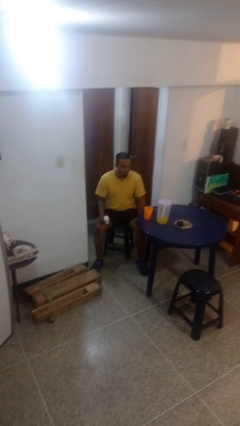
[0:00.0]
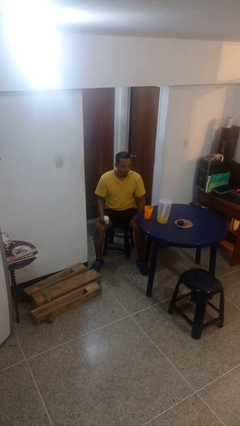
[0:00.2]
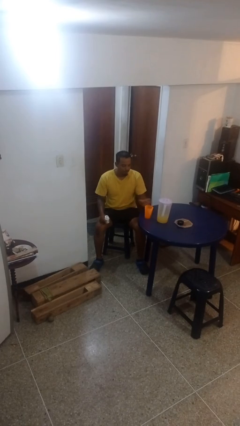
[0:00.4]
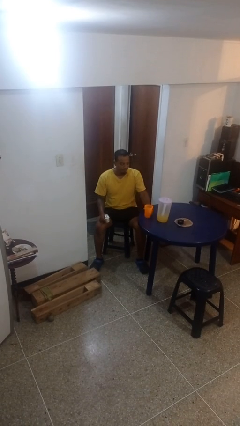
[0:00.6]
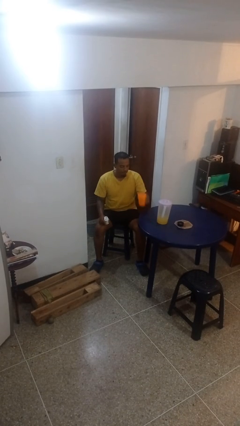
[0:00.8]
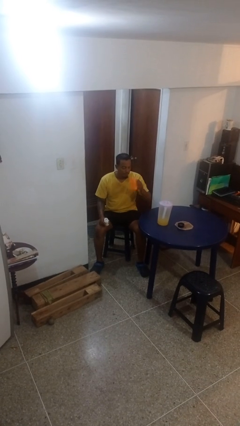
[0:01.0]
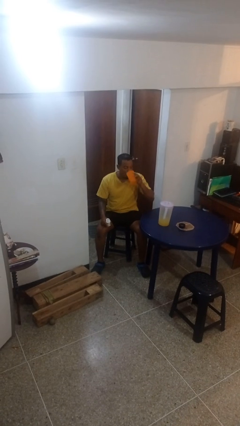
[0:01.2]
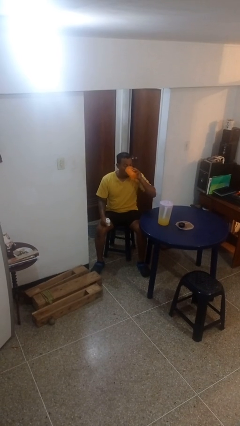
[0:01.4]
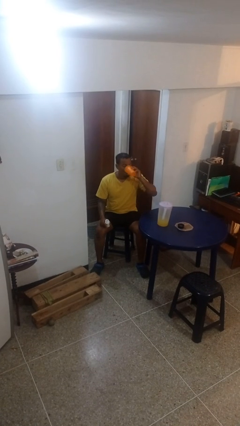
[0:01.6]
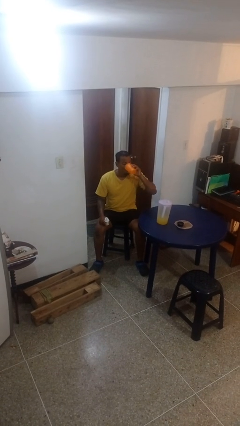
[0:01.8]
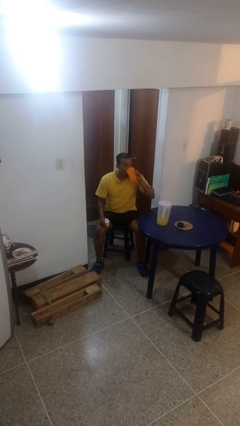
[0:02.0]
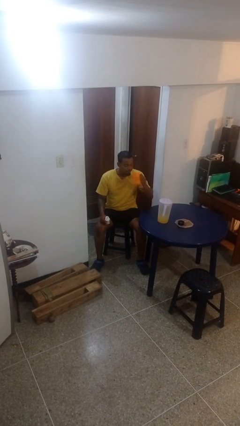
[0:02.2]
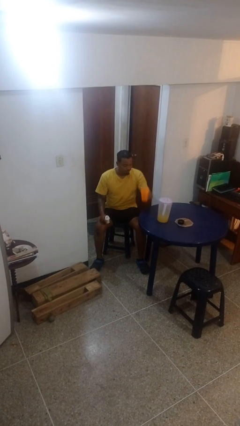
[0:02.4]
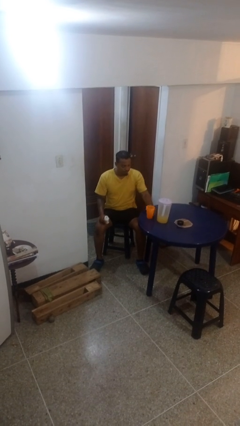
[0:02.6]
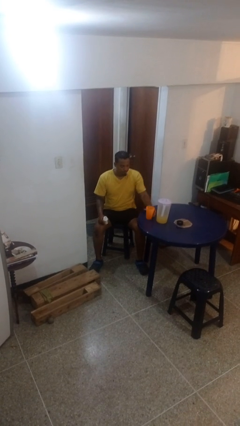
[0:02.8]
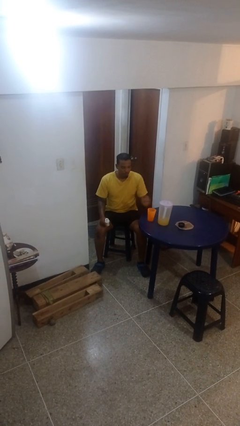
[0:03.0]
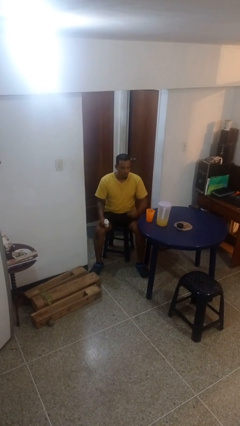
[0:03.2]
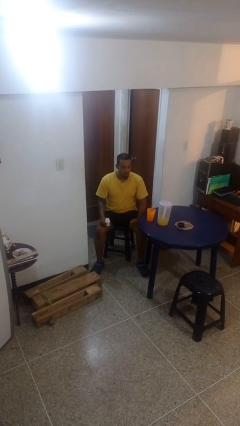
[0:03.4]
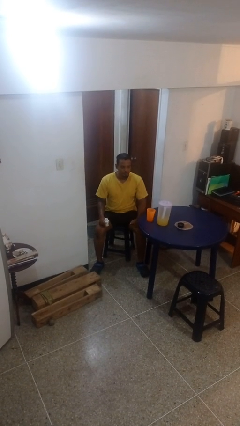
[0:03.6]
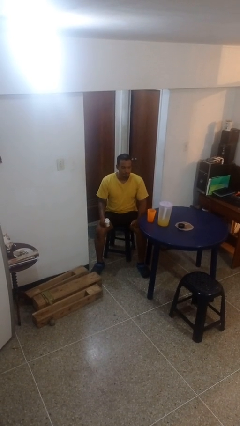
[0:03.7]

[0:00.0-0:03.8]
person drinks from cup

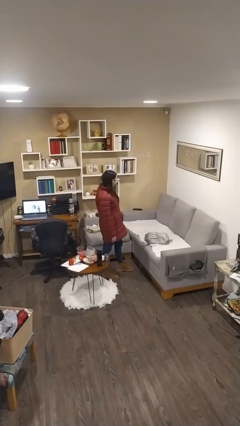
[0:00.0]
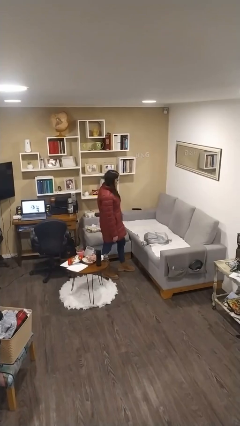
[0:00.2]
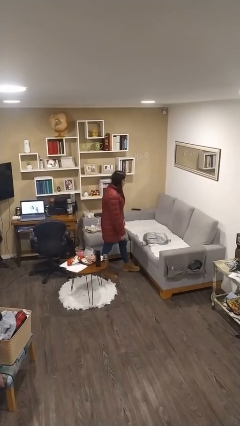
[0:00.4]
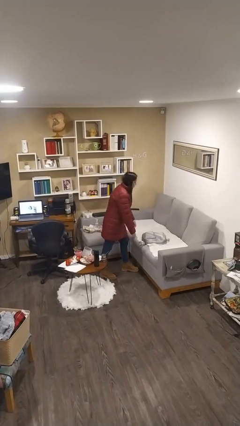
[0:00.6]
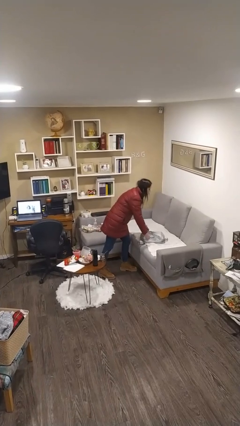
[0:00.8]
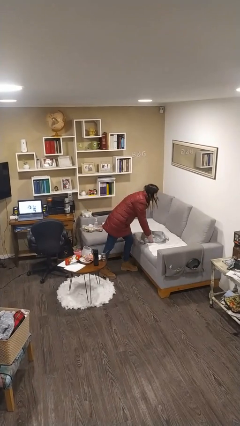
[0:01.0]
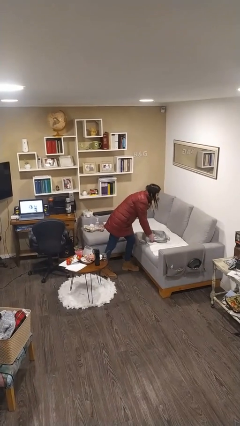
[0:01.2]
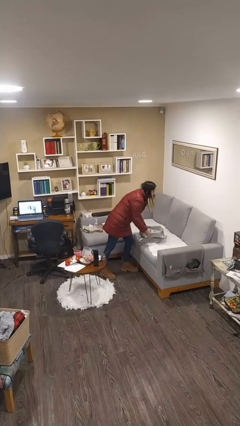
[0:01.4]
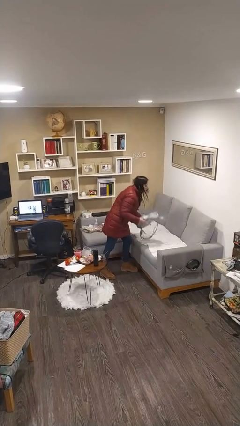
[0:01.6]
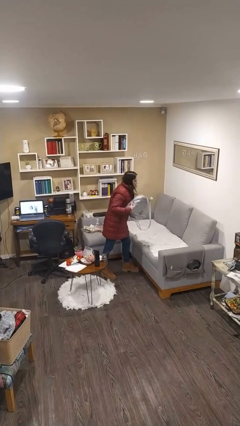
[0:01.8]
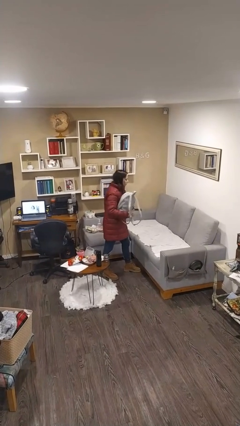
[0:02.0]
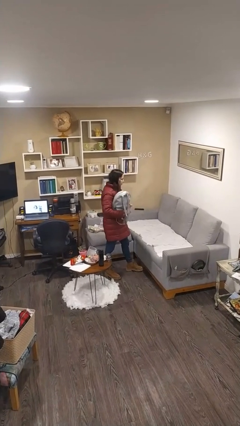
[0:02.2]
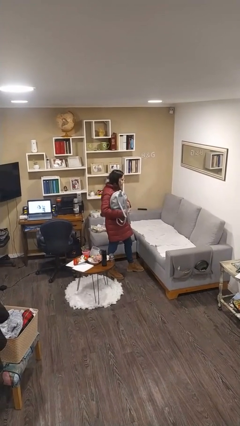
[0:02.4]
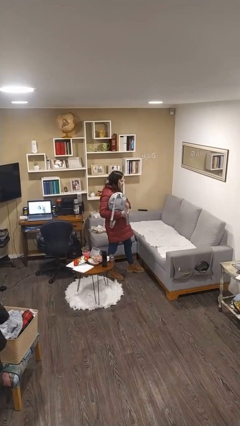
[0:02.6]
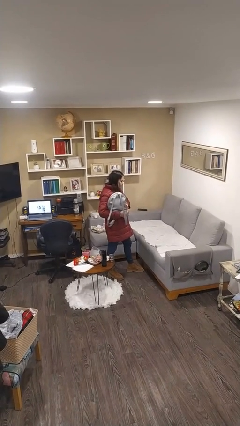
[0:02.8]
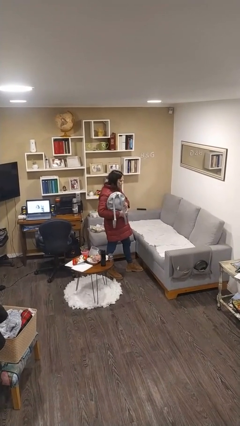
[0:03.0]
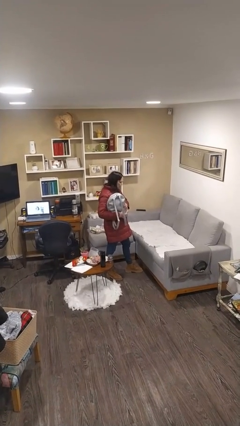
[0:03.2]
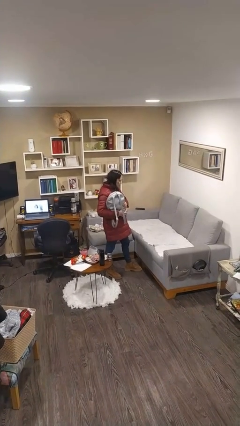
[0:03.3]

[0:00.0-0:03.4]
person picks up object from couch

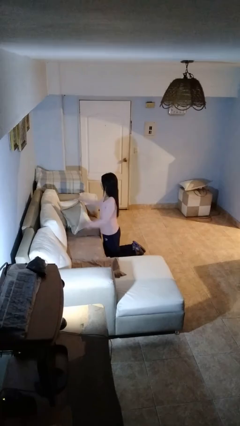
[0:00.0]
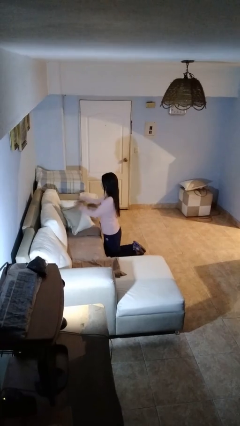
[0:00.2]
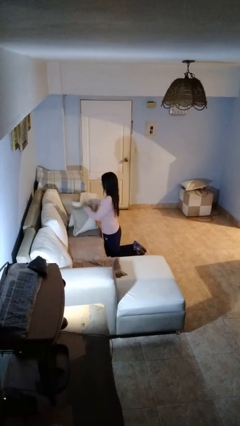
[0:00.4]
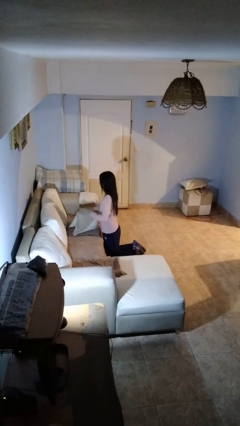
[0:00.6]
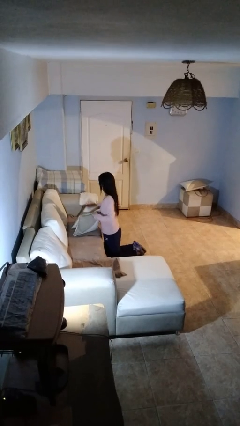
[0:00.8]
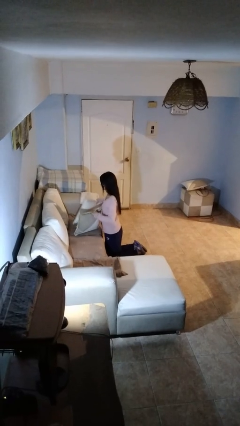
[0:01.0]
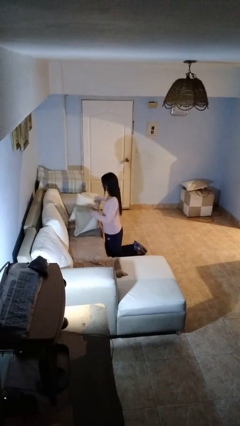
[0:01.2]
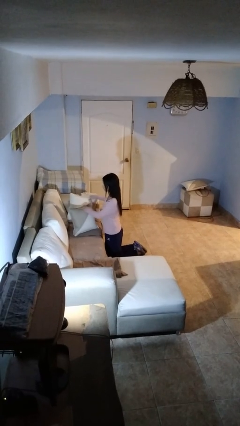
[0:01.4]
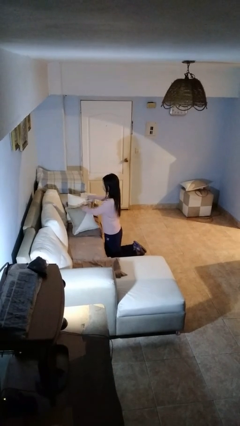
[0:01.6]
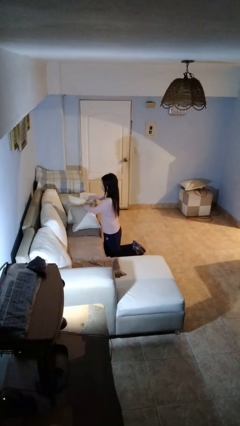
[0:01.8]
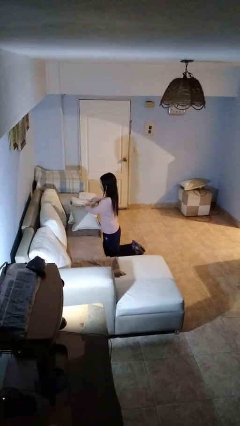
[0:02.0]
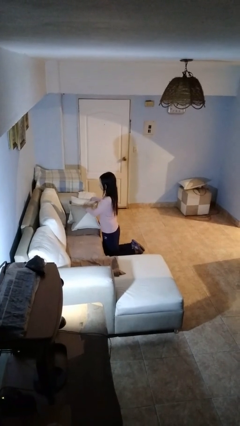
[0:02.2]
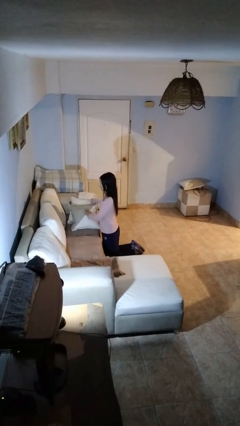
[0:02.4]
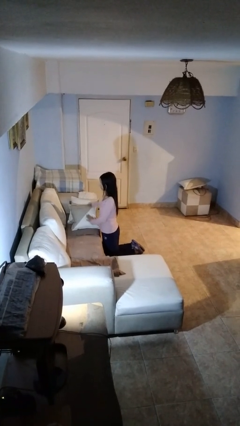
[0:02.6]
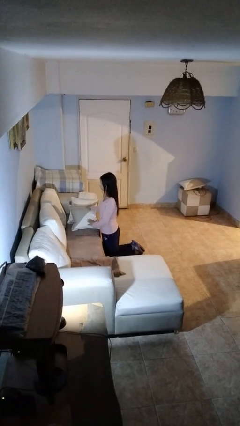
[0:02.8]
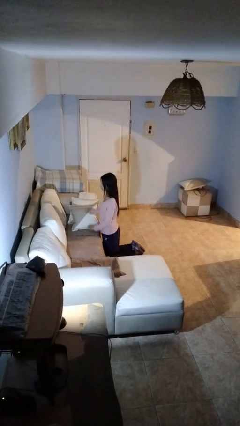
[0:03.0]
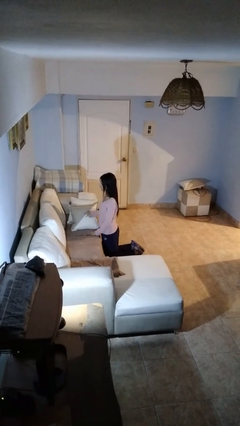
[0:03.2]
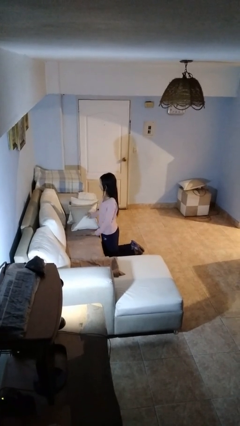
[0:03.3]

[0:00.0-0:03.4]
person searches in couch

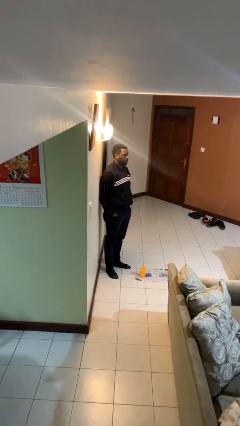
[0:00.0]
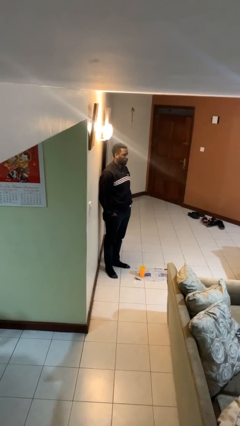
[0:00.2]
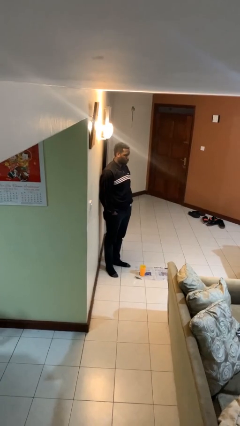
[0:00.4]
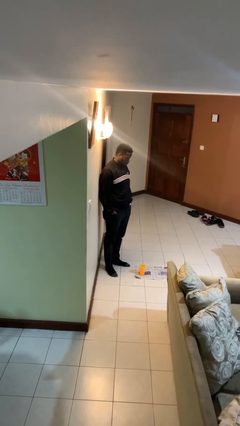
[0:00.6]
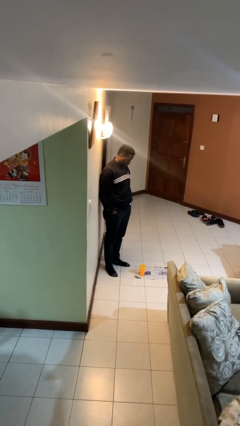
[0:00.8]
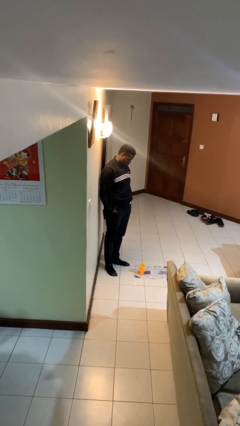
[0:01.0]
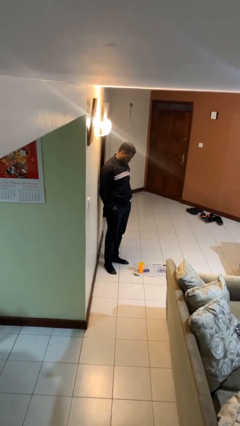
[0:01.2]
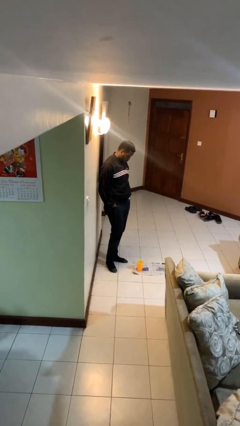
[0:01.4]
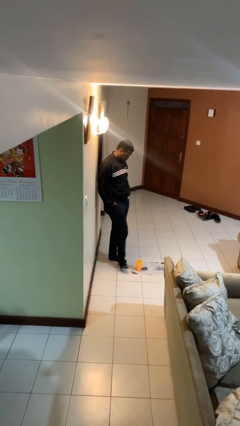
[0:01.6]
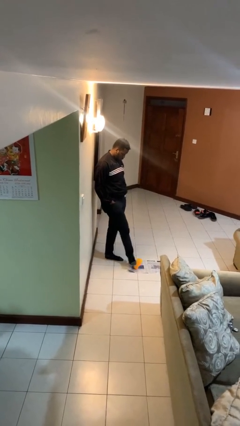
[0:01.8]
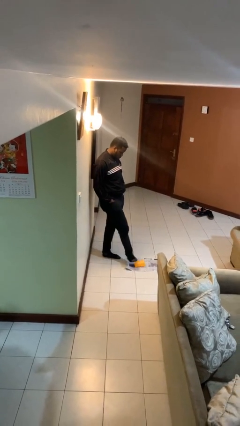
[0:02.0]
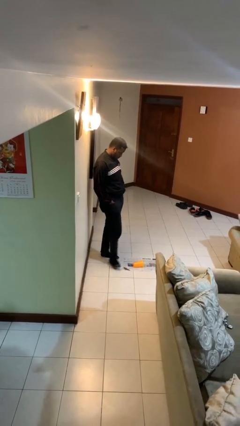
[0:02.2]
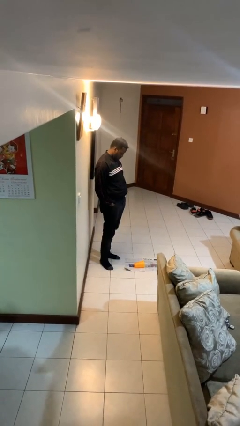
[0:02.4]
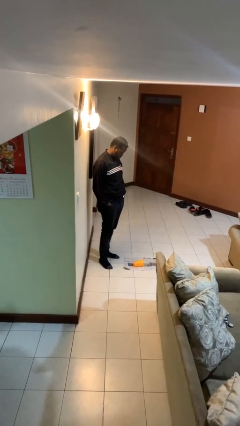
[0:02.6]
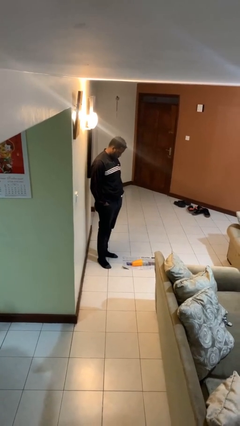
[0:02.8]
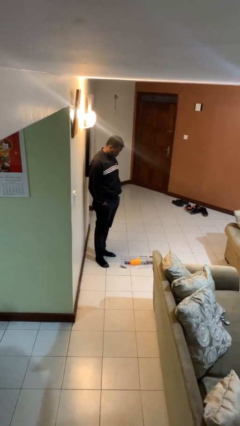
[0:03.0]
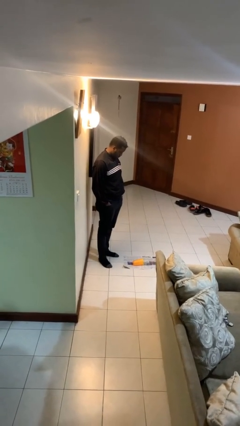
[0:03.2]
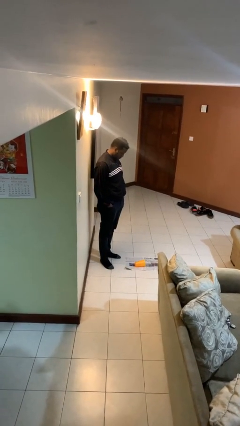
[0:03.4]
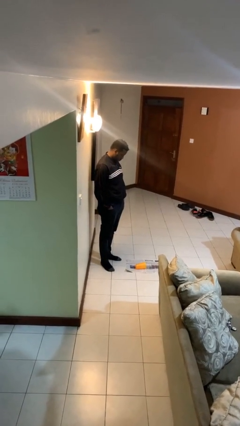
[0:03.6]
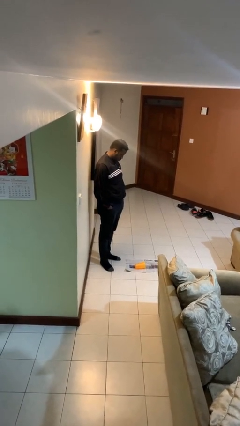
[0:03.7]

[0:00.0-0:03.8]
person spills on floor

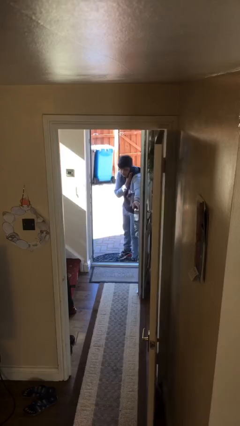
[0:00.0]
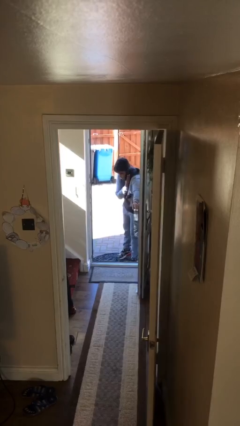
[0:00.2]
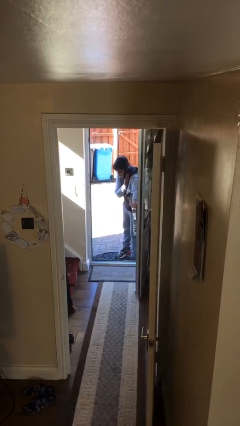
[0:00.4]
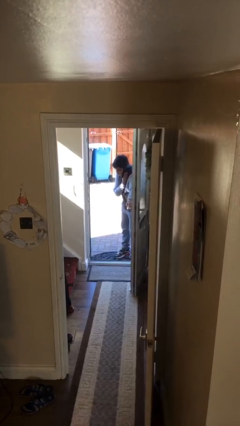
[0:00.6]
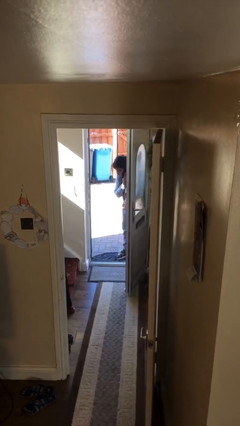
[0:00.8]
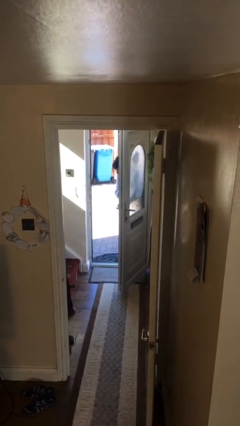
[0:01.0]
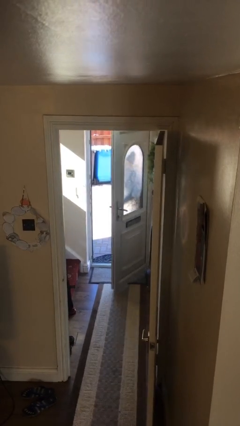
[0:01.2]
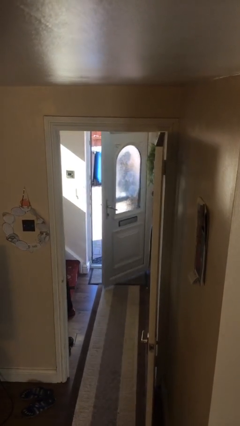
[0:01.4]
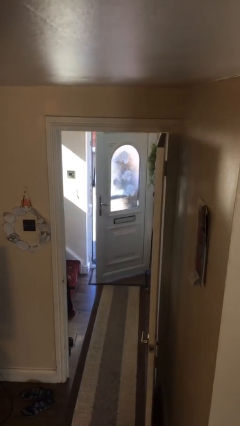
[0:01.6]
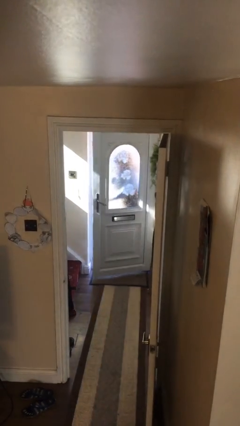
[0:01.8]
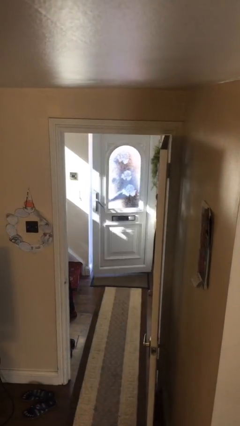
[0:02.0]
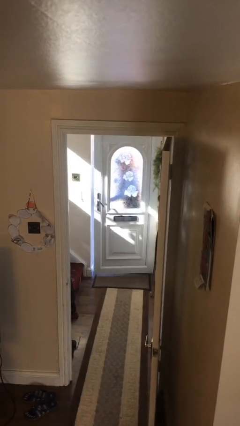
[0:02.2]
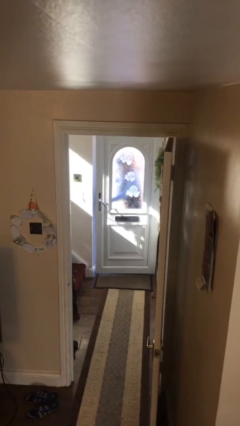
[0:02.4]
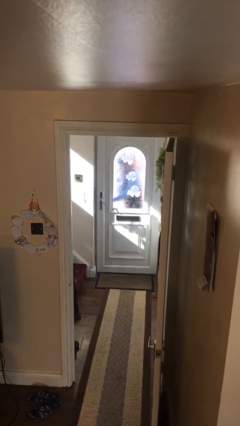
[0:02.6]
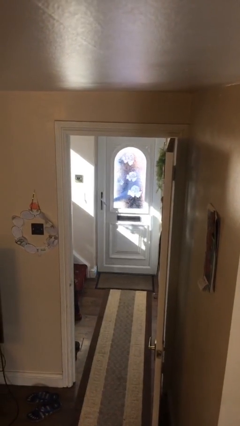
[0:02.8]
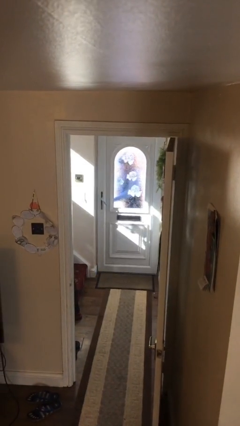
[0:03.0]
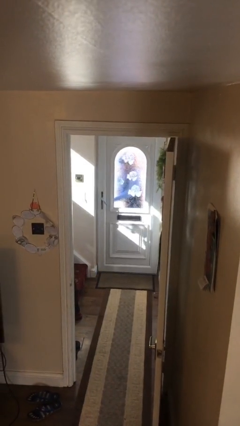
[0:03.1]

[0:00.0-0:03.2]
person closes facility door
